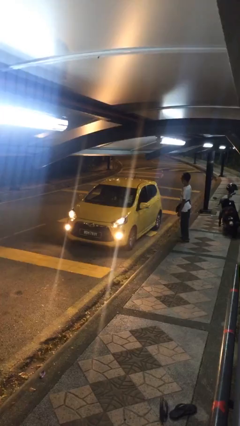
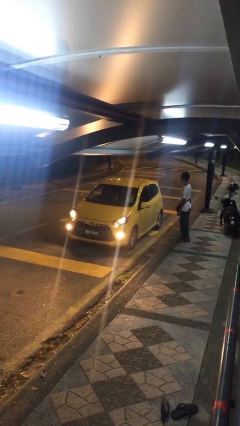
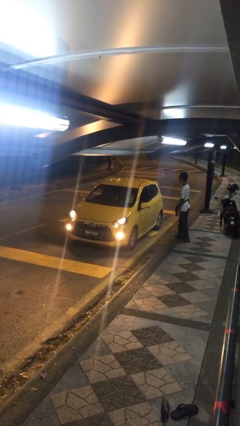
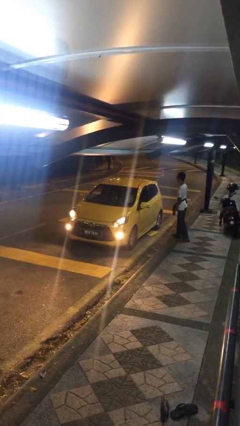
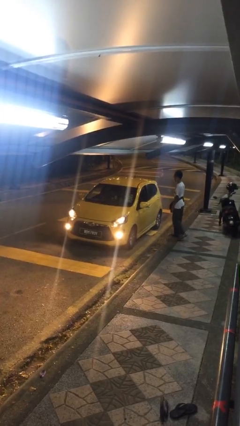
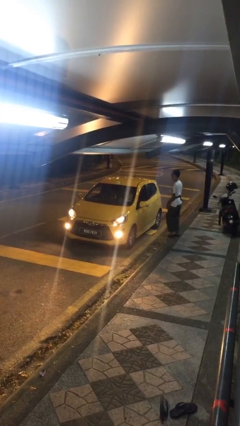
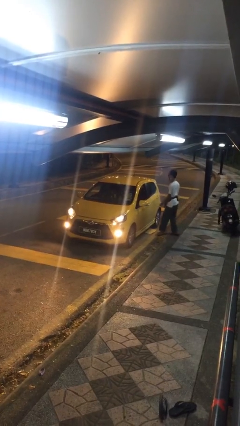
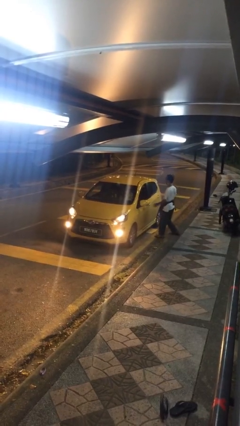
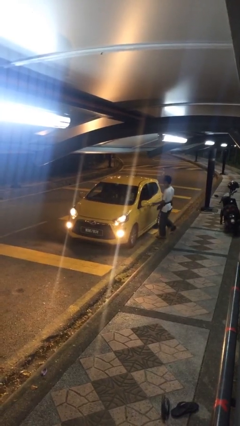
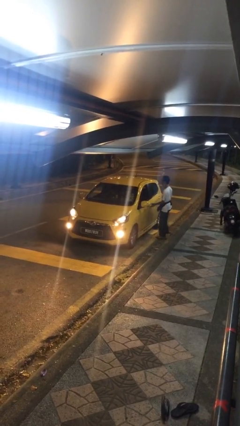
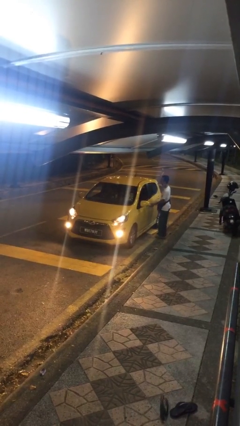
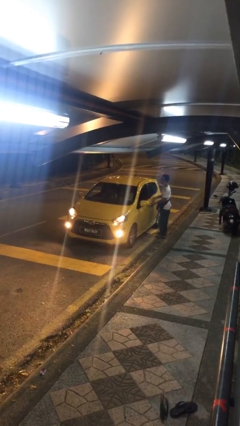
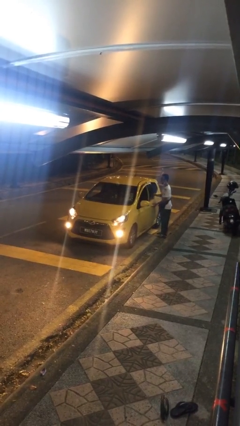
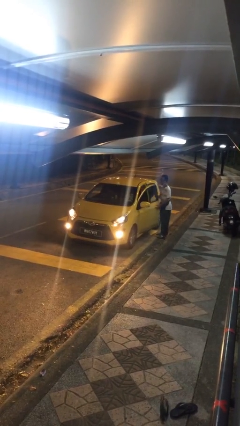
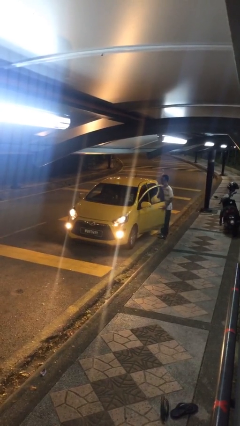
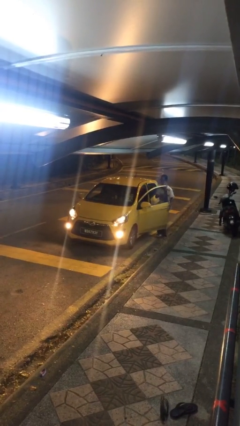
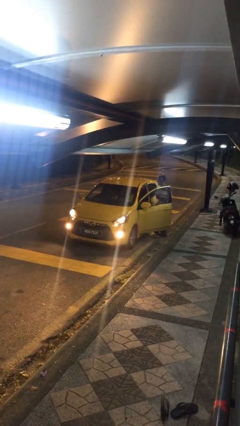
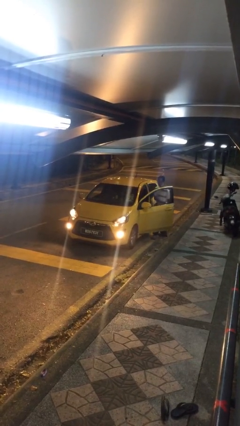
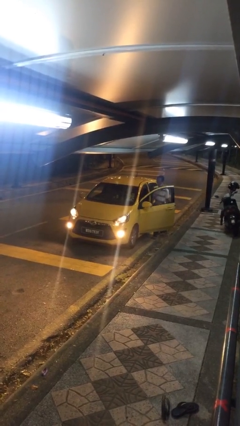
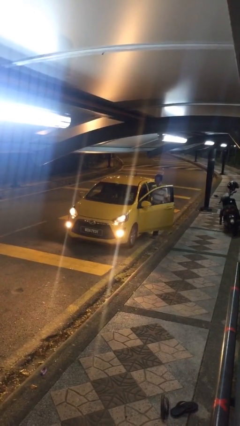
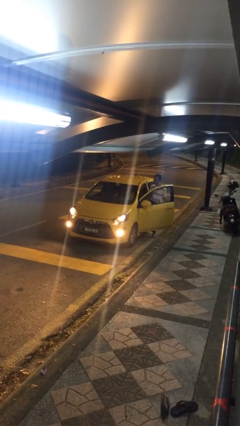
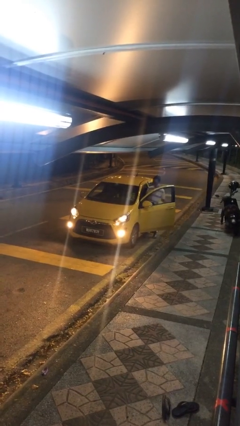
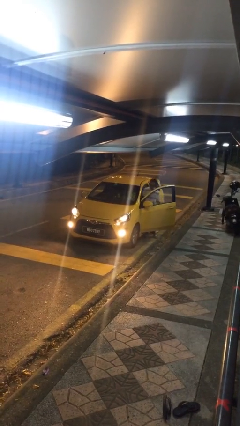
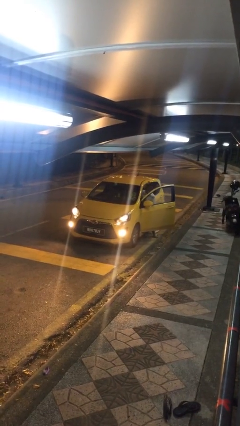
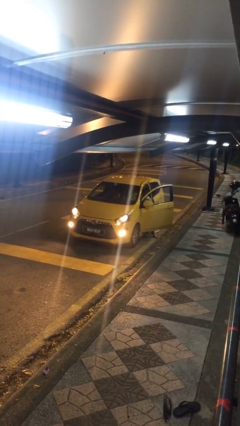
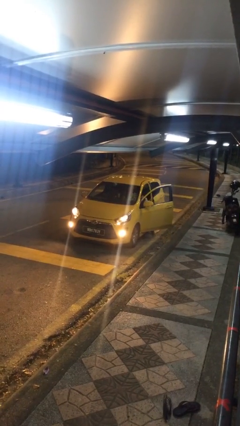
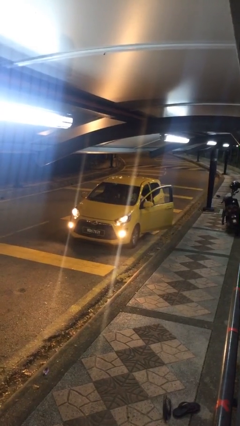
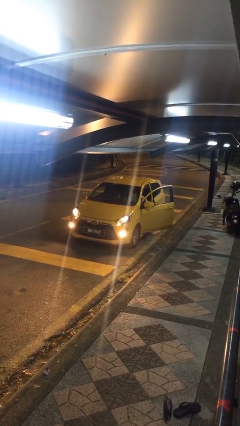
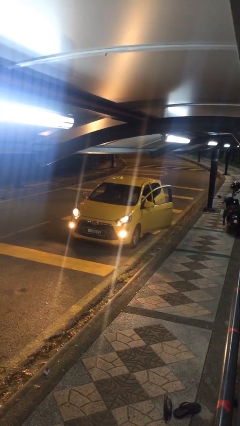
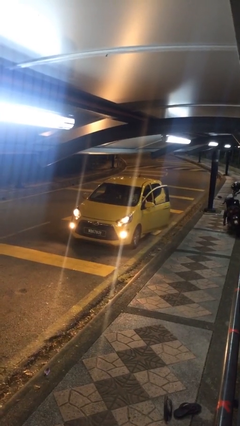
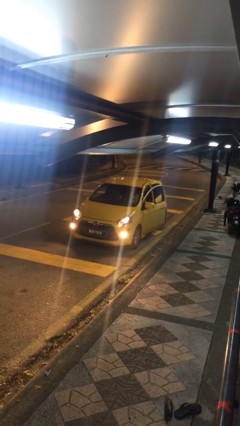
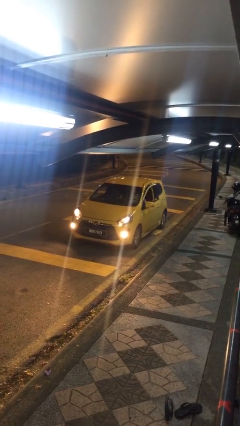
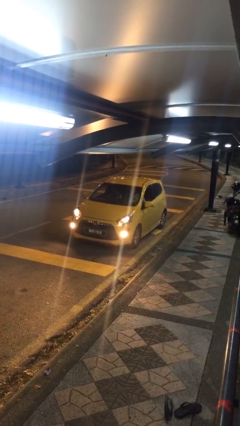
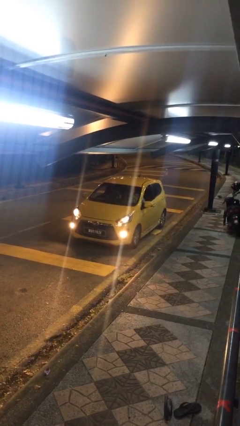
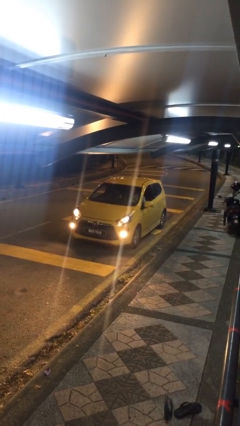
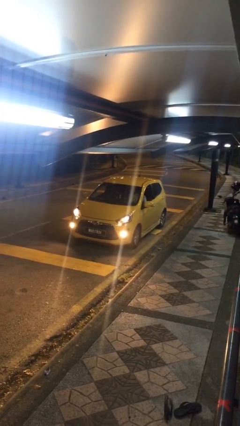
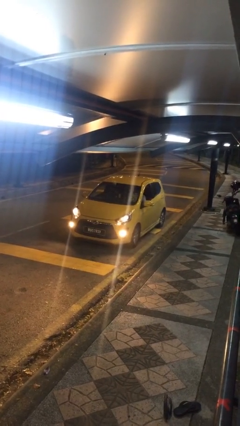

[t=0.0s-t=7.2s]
car picks up person

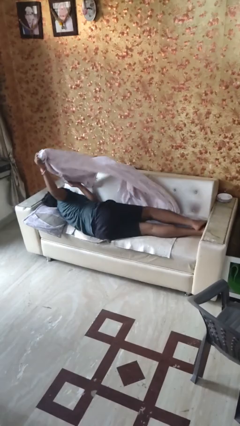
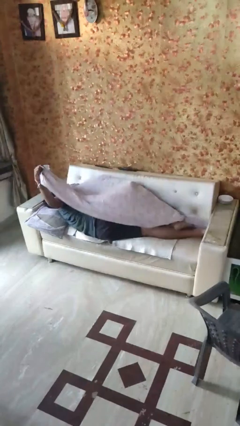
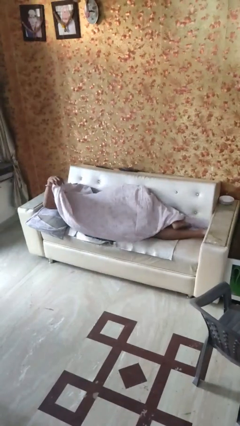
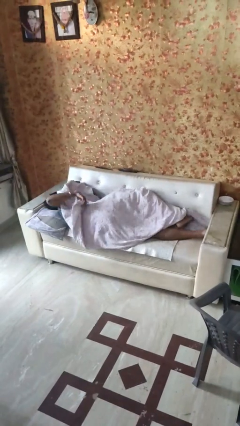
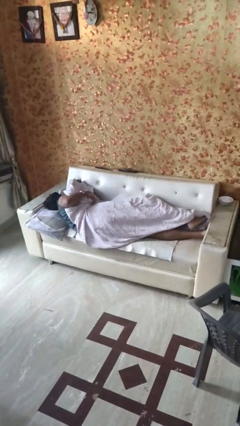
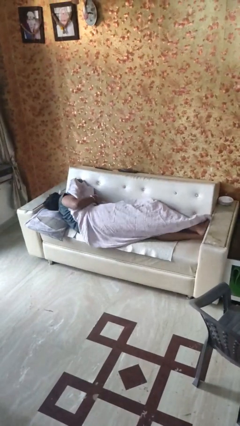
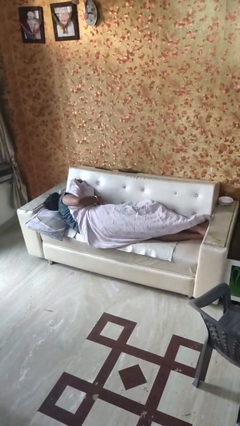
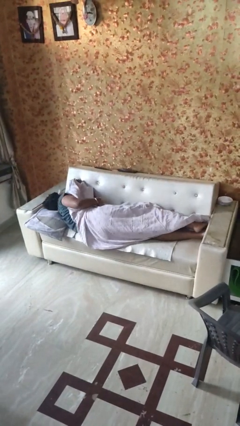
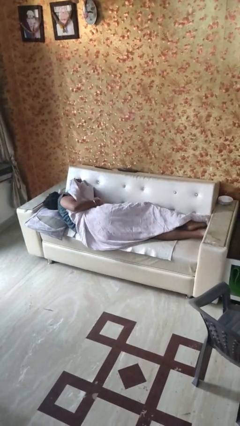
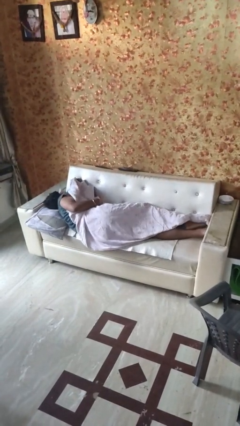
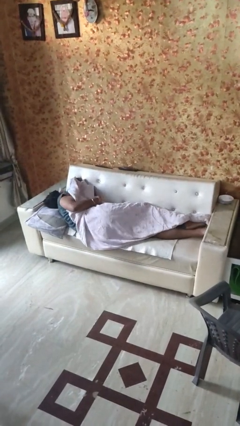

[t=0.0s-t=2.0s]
person covers with bedsheets

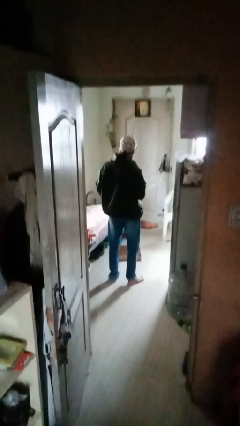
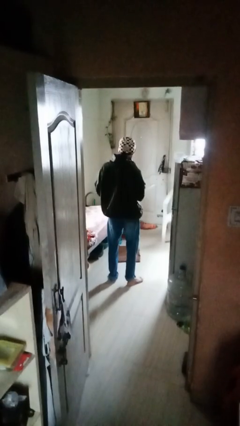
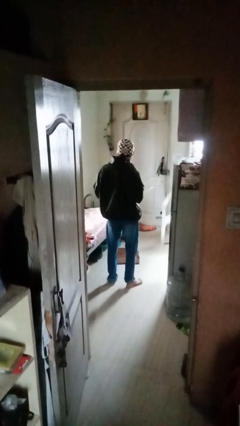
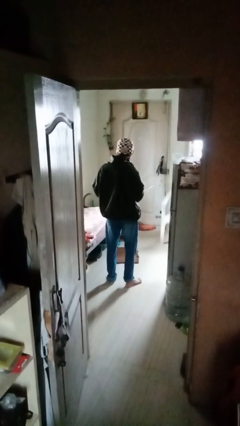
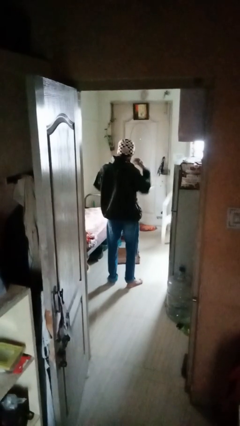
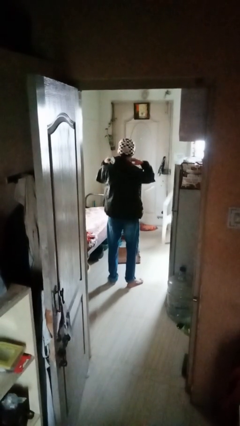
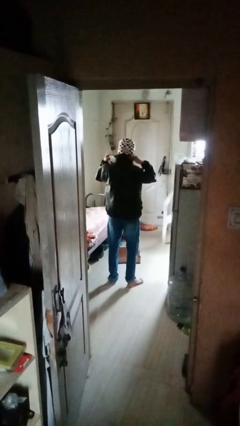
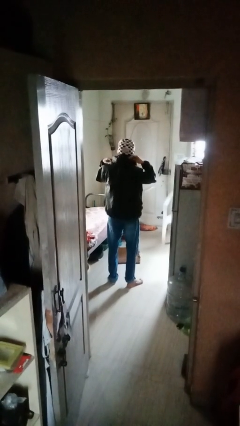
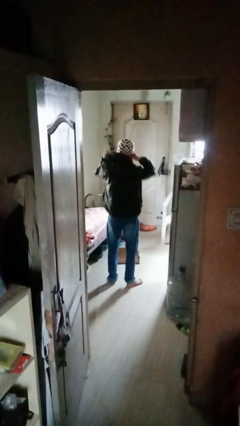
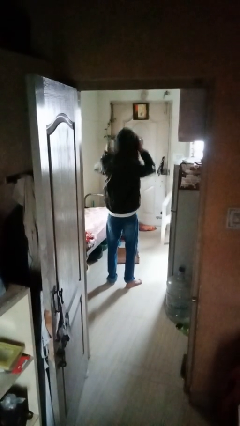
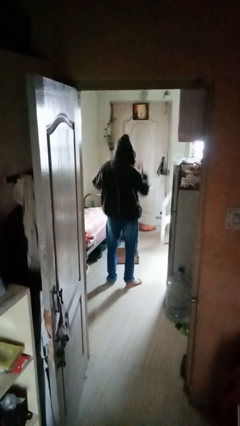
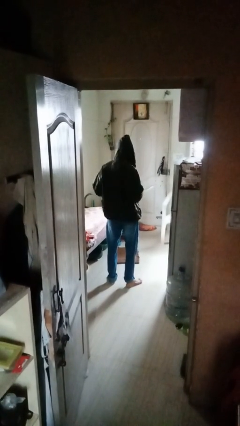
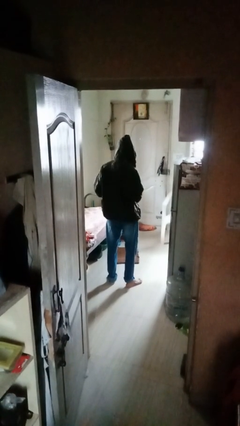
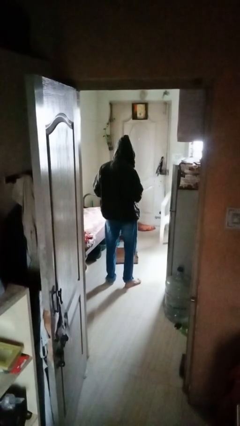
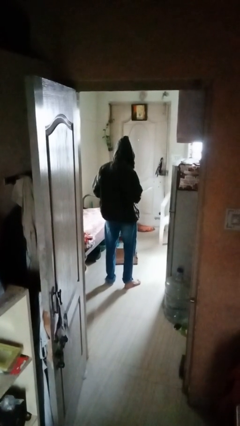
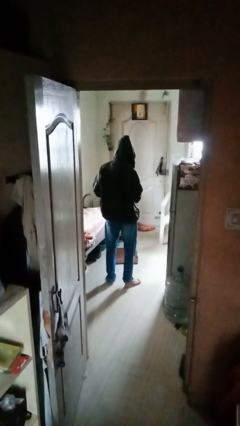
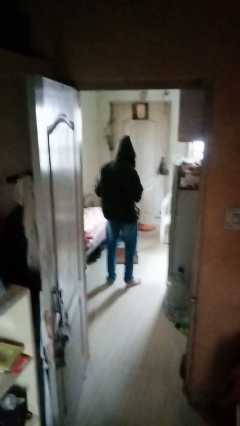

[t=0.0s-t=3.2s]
person puts on hoodie

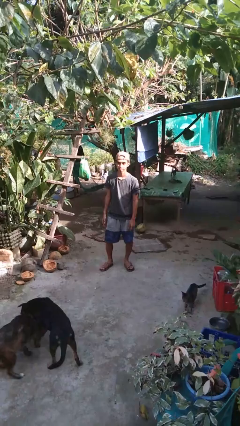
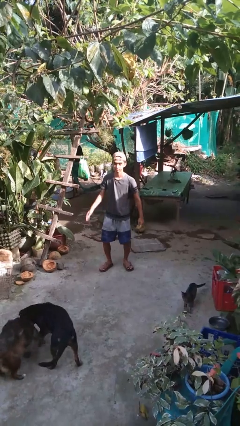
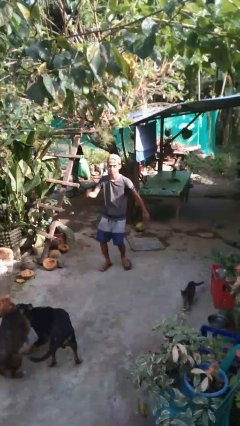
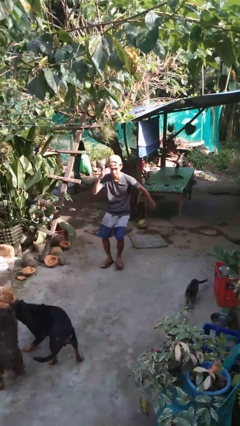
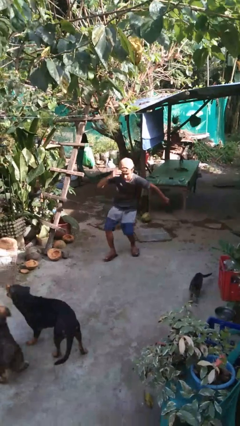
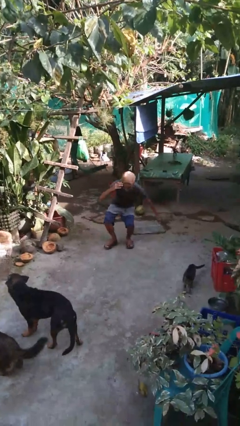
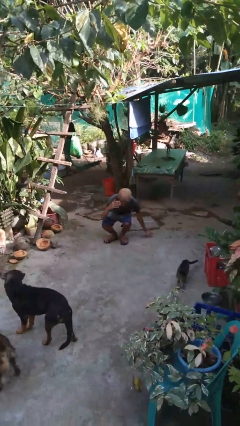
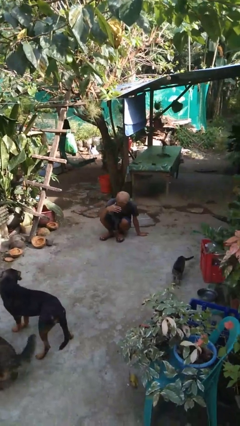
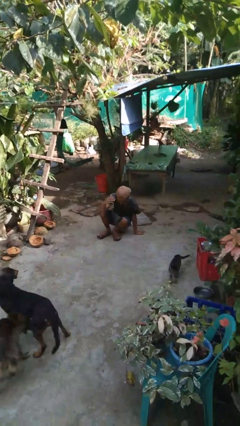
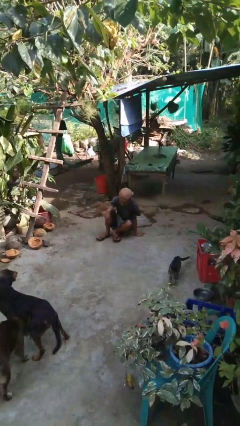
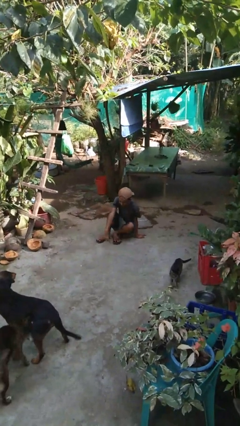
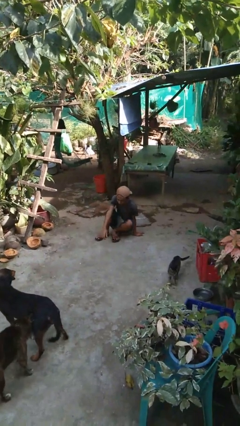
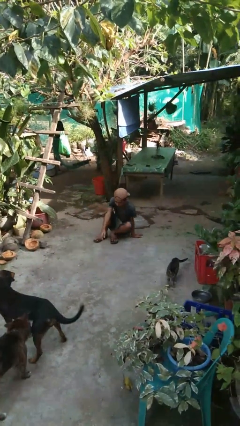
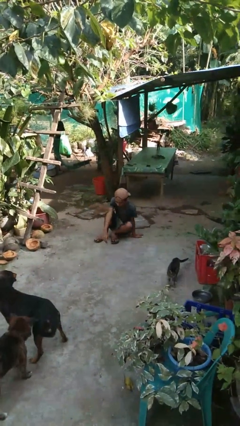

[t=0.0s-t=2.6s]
person falls while standing

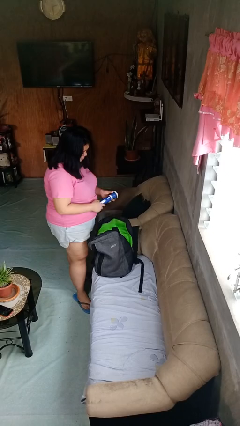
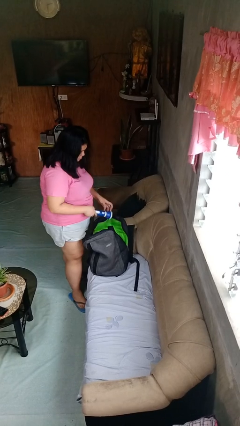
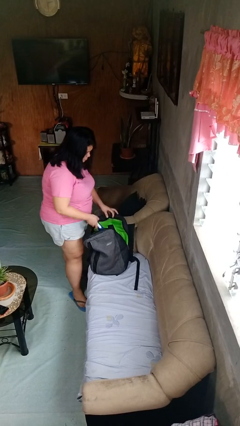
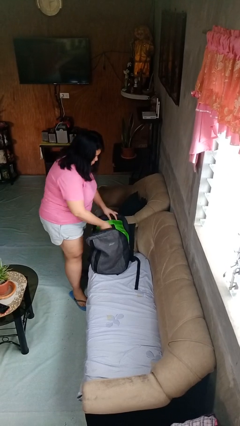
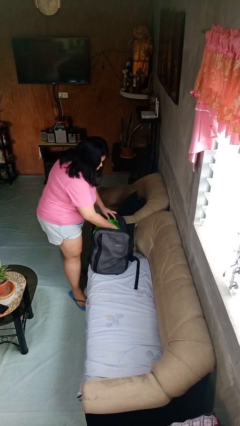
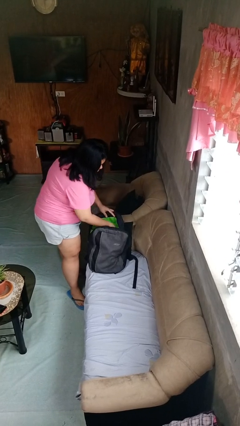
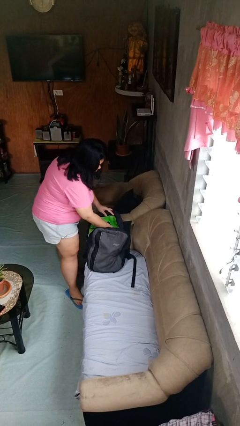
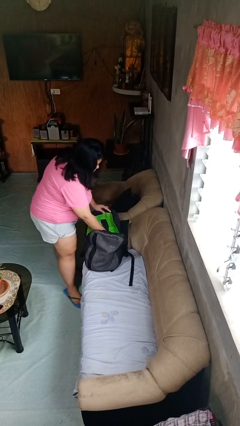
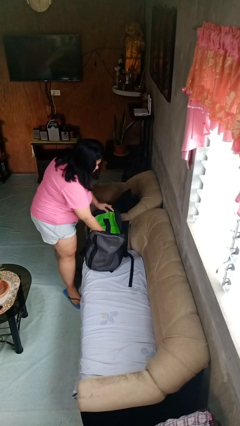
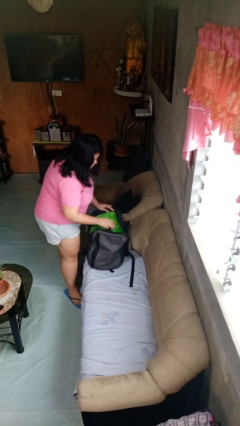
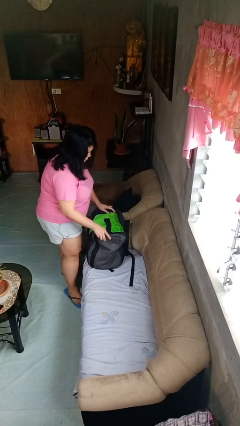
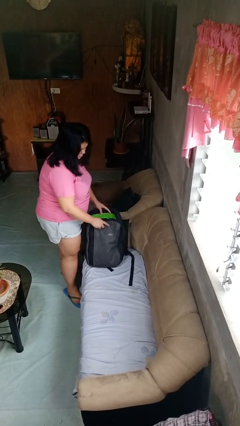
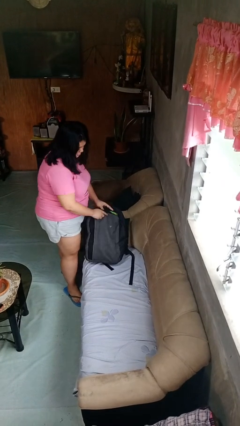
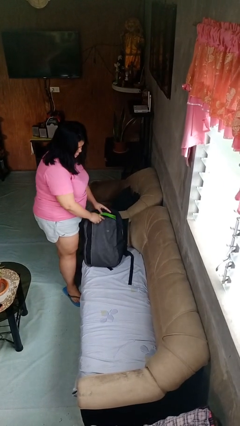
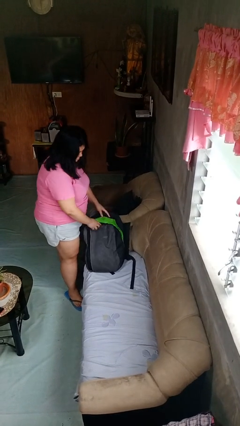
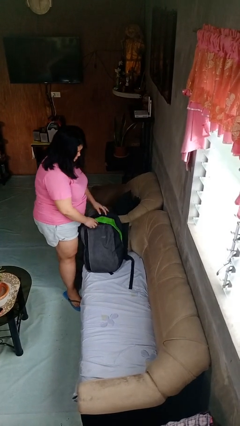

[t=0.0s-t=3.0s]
person puts object into backpack
